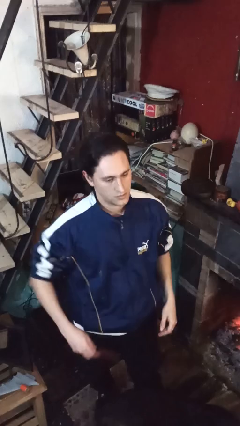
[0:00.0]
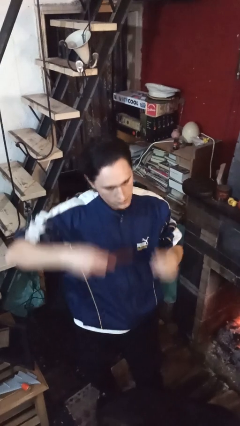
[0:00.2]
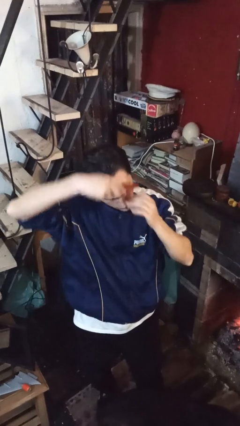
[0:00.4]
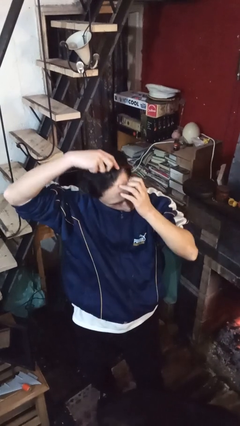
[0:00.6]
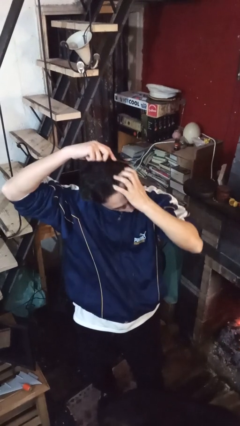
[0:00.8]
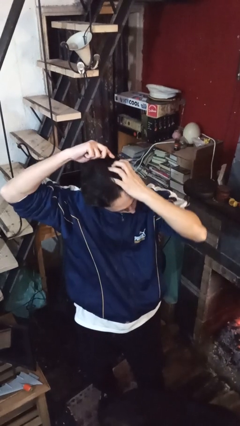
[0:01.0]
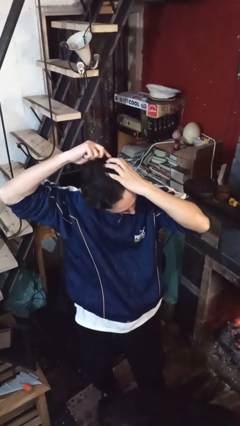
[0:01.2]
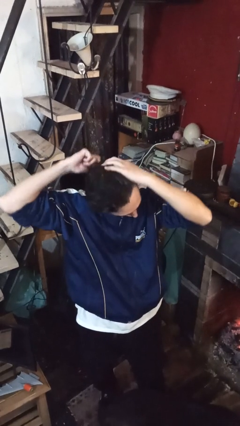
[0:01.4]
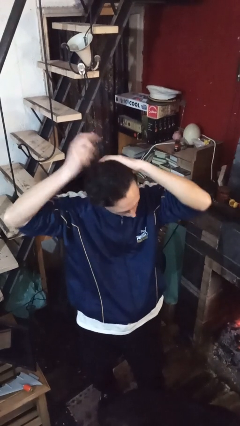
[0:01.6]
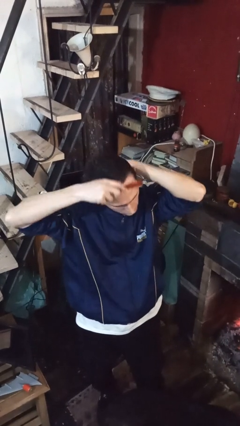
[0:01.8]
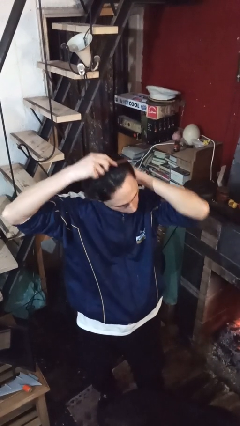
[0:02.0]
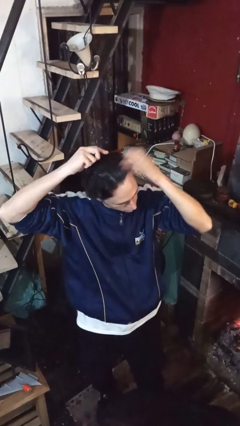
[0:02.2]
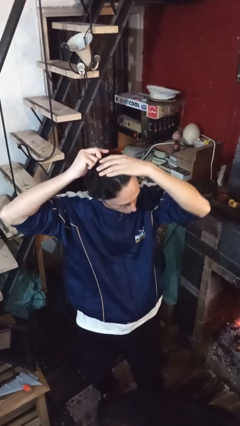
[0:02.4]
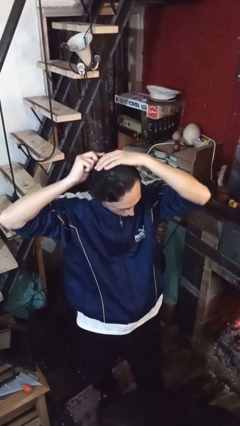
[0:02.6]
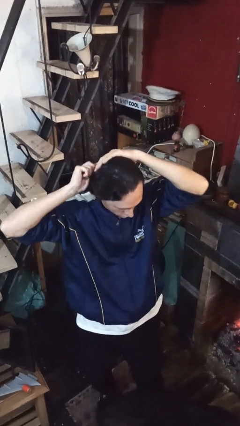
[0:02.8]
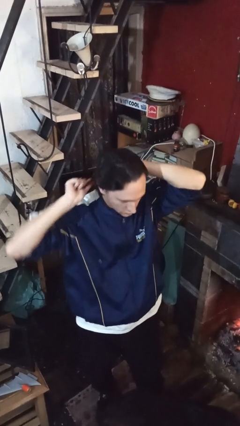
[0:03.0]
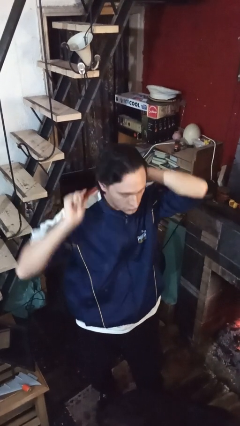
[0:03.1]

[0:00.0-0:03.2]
person brushes hair

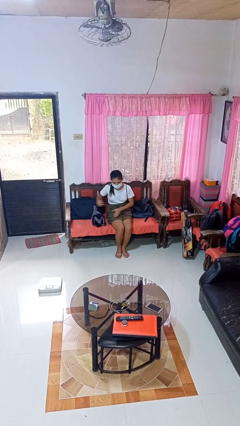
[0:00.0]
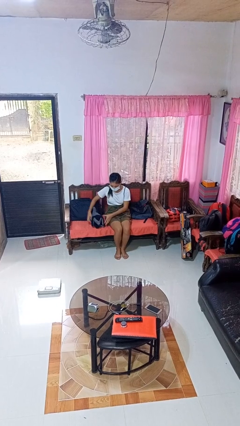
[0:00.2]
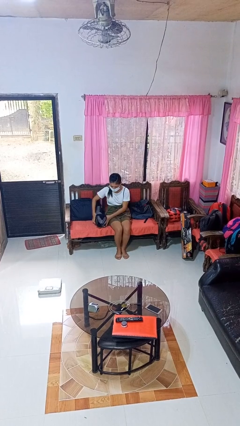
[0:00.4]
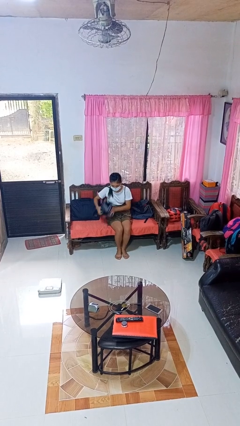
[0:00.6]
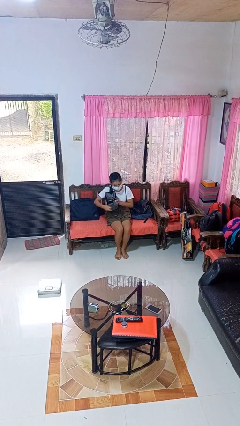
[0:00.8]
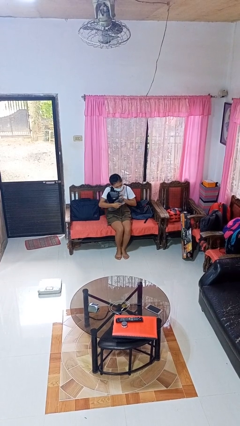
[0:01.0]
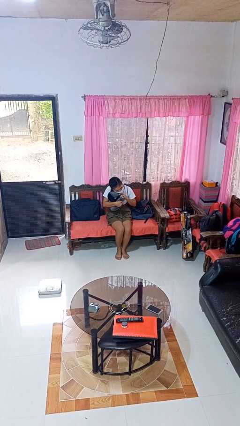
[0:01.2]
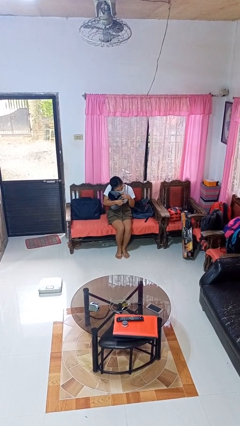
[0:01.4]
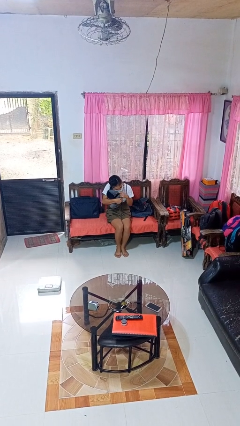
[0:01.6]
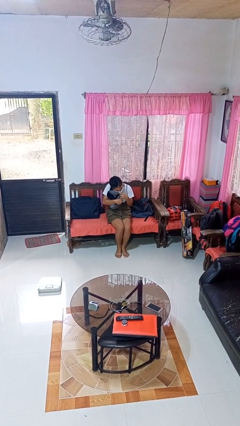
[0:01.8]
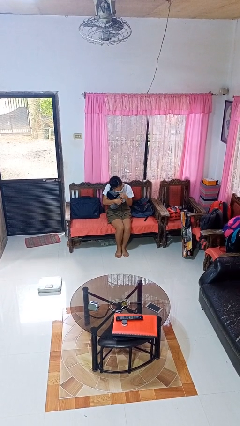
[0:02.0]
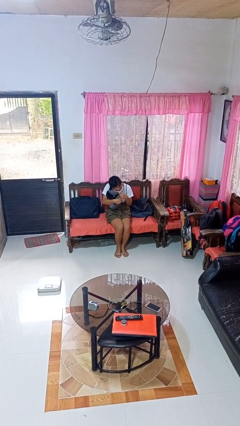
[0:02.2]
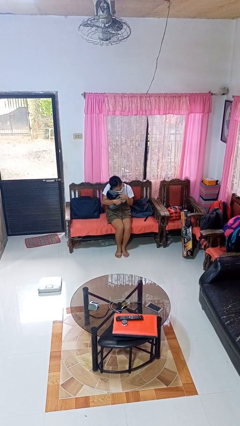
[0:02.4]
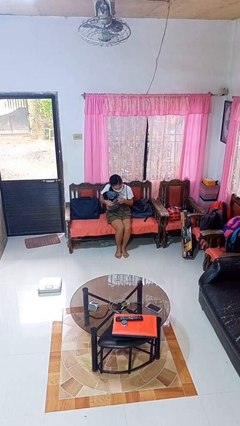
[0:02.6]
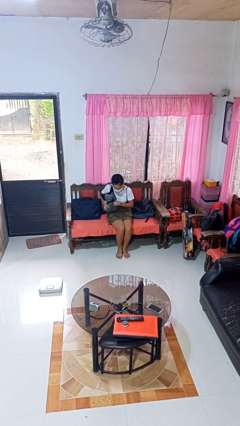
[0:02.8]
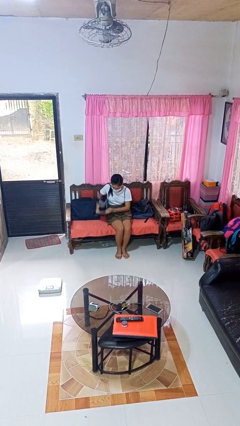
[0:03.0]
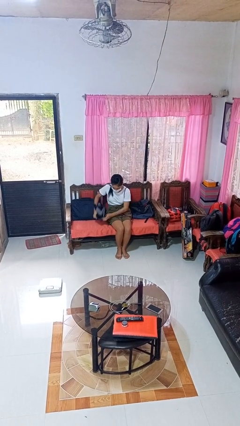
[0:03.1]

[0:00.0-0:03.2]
person hugs stuffed animal

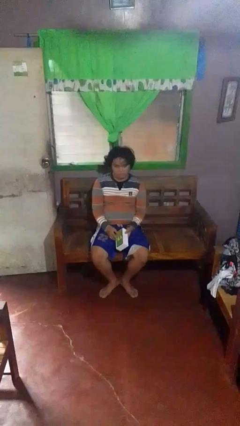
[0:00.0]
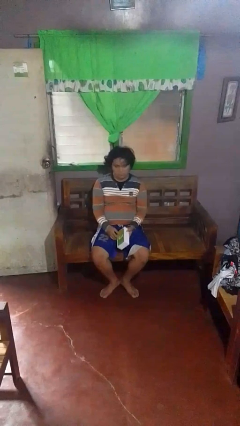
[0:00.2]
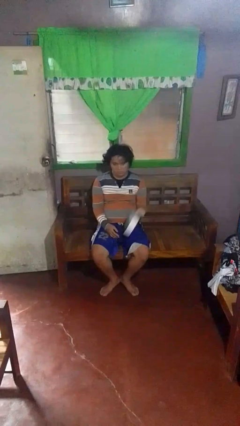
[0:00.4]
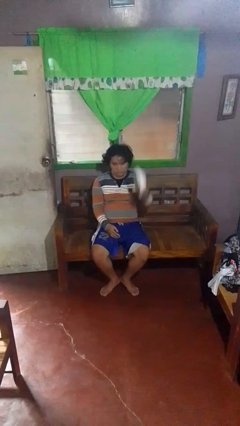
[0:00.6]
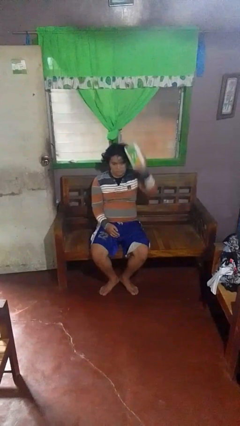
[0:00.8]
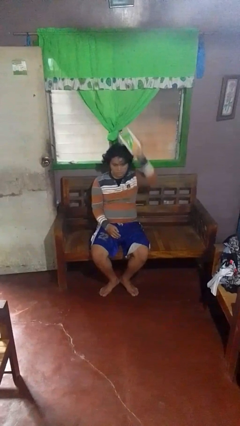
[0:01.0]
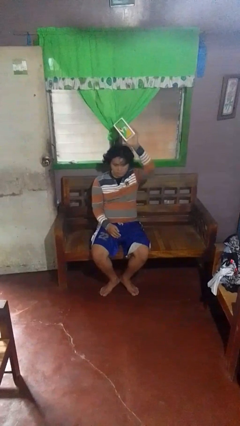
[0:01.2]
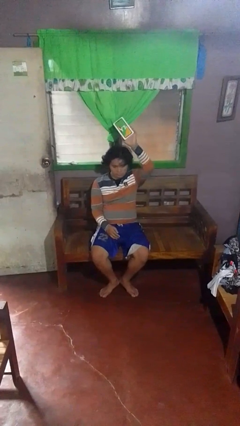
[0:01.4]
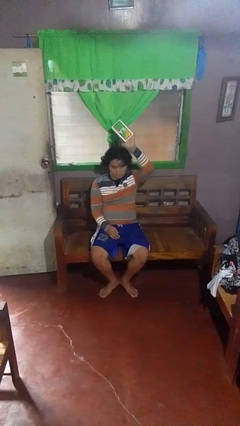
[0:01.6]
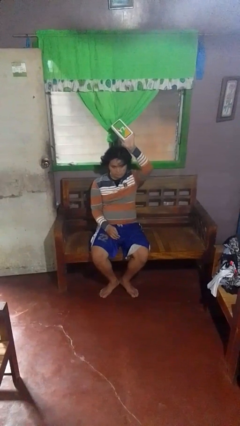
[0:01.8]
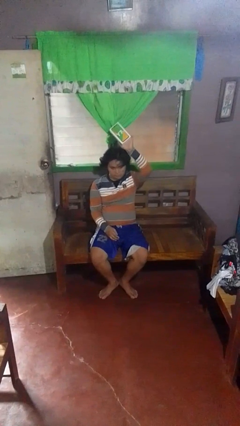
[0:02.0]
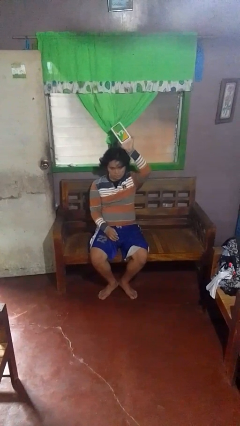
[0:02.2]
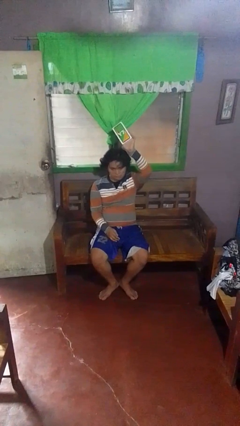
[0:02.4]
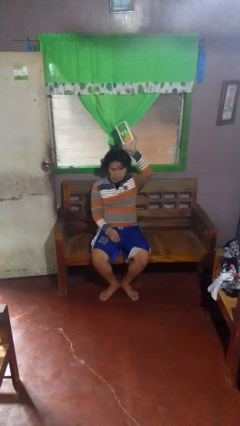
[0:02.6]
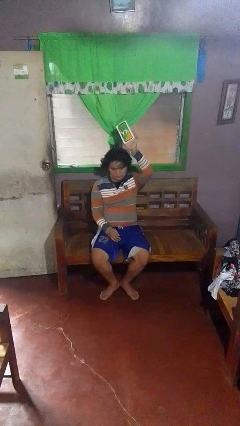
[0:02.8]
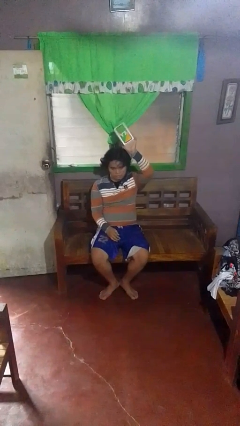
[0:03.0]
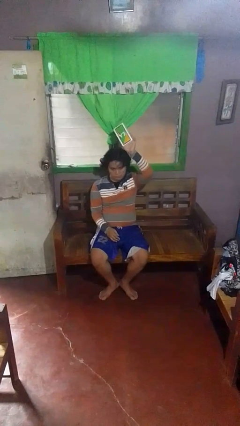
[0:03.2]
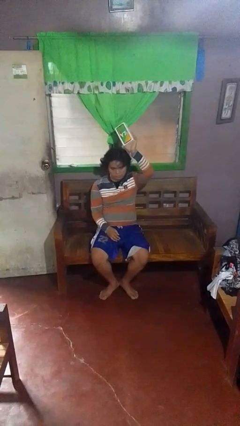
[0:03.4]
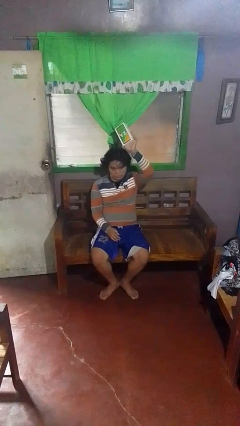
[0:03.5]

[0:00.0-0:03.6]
person holds object above head
